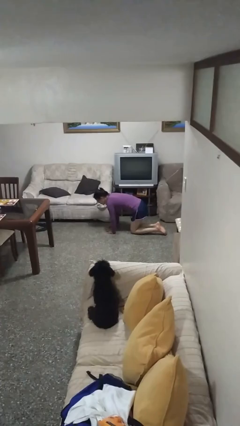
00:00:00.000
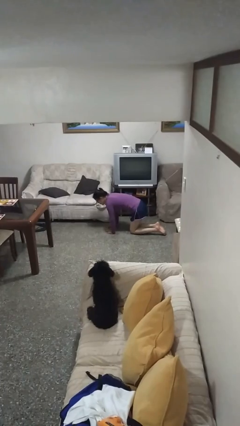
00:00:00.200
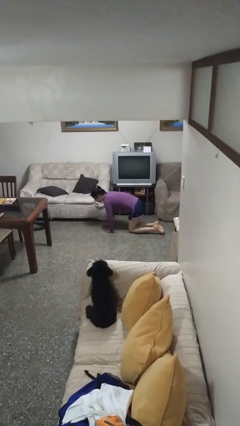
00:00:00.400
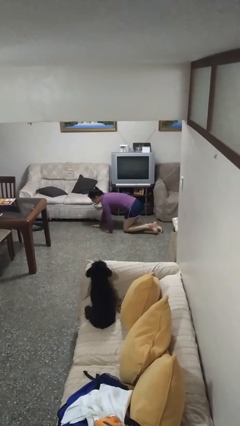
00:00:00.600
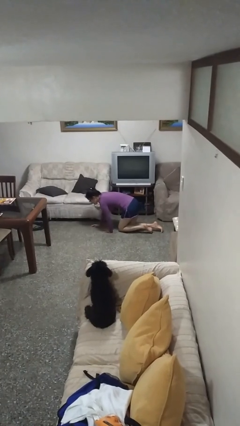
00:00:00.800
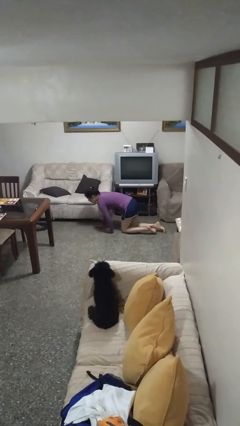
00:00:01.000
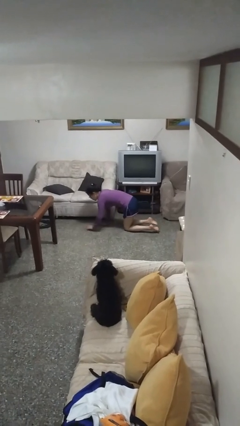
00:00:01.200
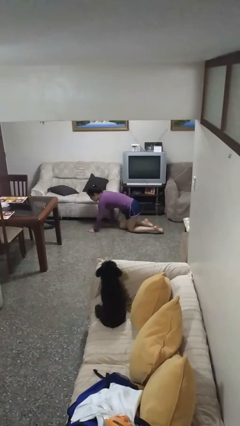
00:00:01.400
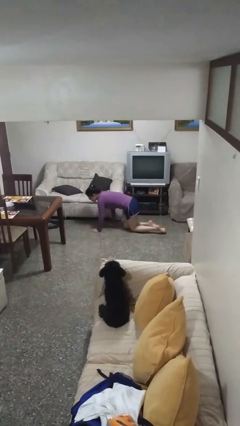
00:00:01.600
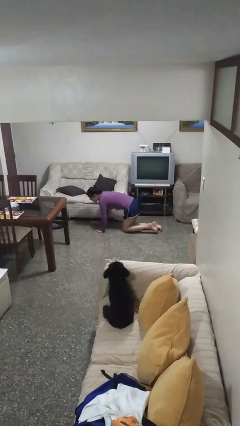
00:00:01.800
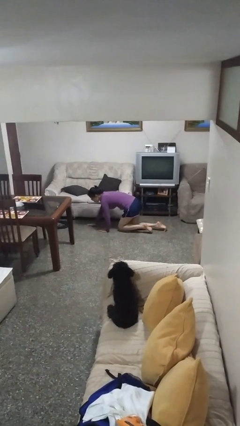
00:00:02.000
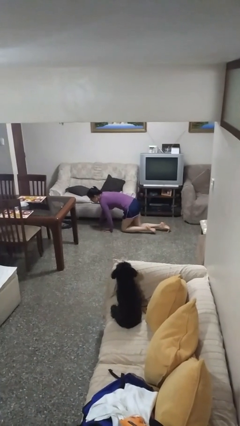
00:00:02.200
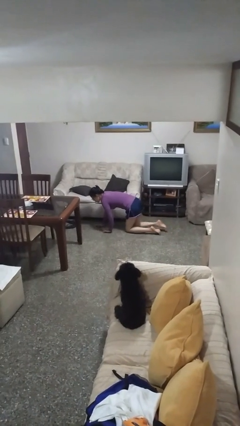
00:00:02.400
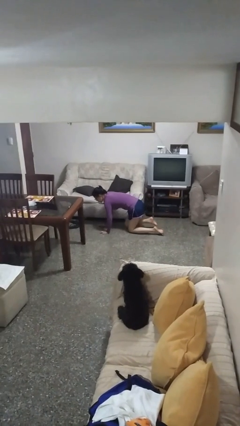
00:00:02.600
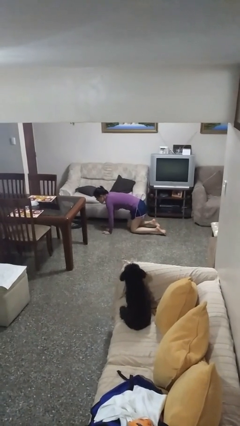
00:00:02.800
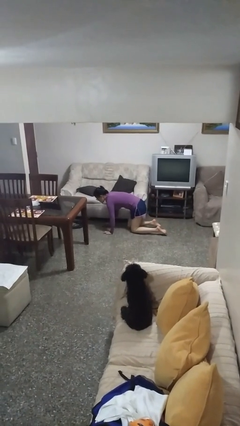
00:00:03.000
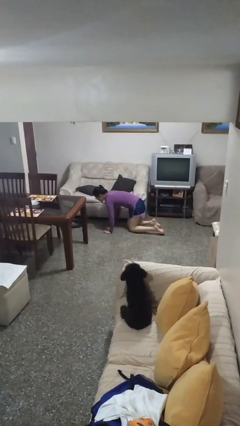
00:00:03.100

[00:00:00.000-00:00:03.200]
person crawls

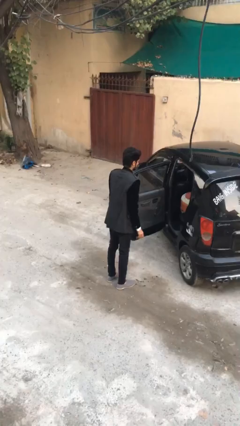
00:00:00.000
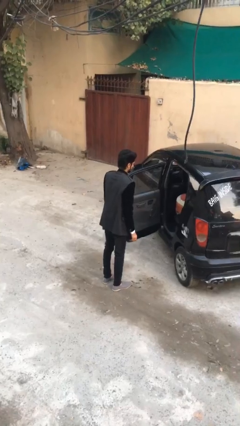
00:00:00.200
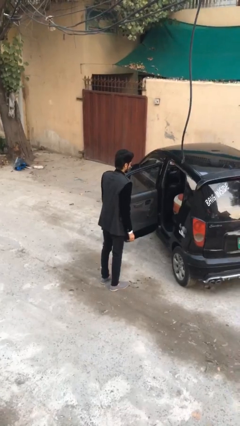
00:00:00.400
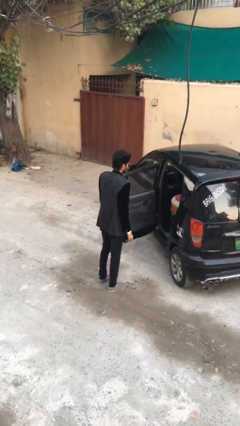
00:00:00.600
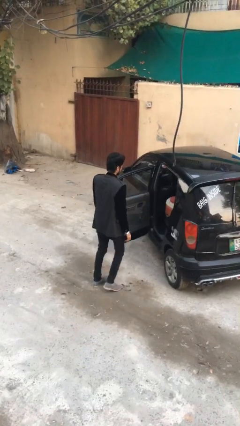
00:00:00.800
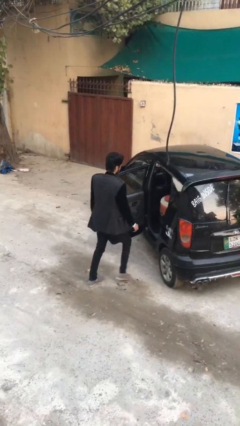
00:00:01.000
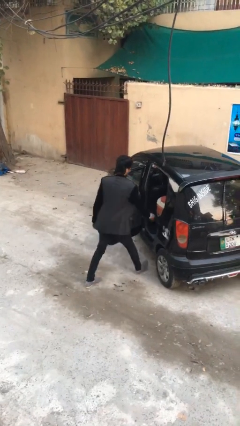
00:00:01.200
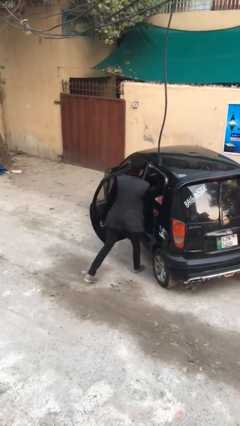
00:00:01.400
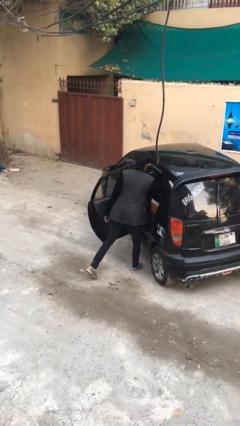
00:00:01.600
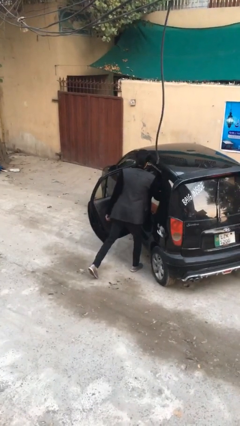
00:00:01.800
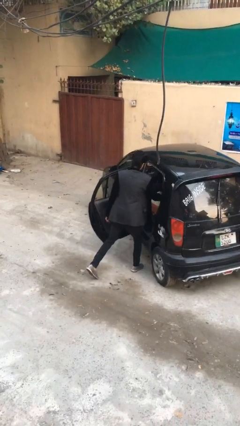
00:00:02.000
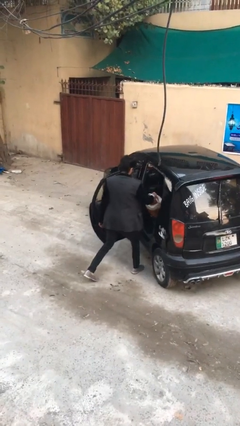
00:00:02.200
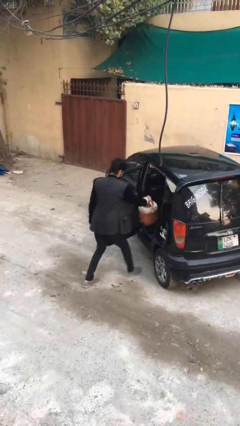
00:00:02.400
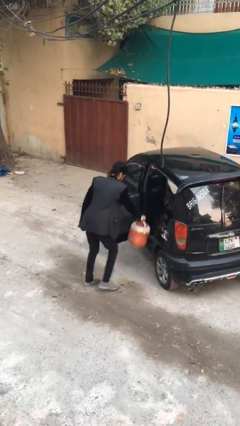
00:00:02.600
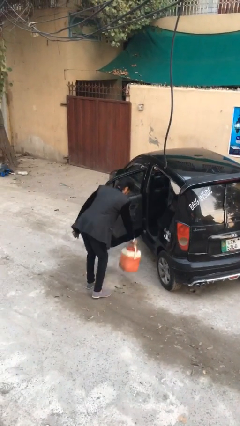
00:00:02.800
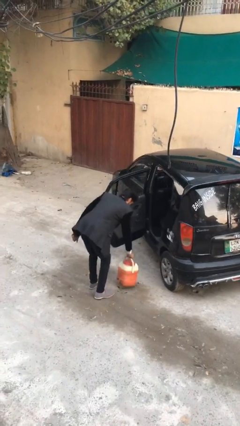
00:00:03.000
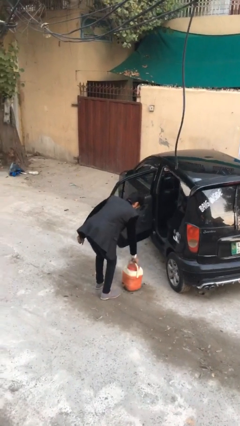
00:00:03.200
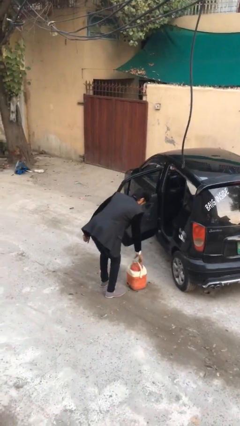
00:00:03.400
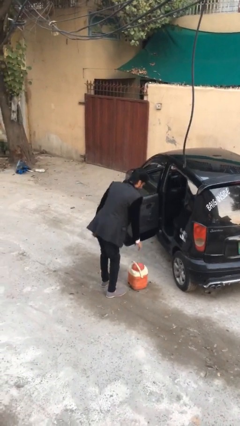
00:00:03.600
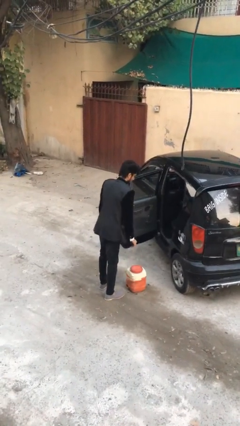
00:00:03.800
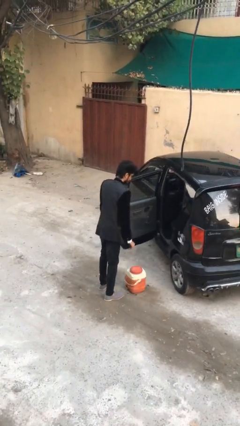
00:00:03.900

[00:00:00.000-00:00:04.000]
person unloads car

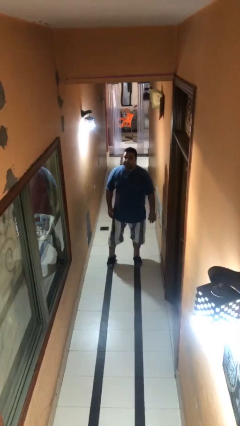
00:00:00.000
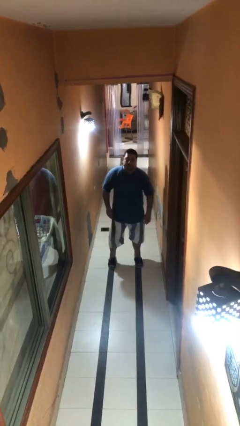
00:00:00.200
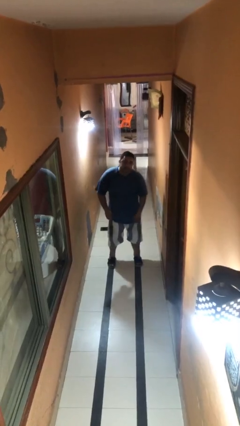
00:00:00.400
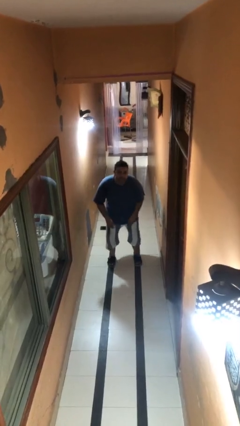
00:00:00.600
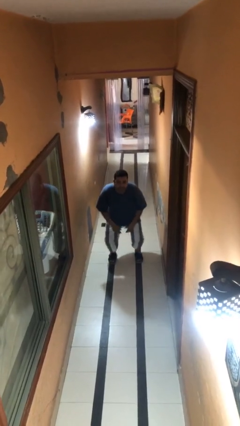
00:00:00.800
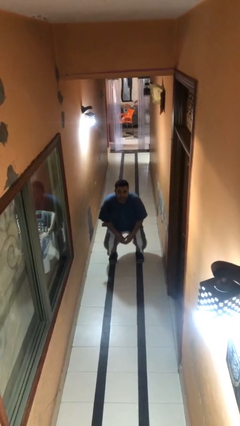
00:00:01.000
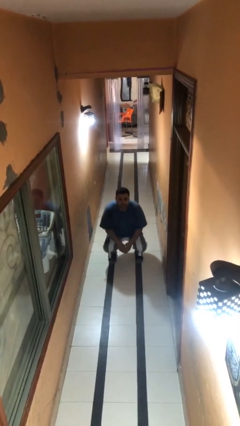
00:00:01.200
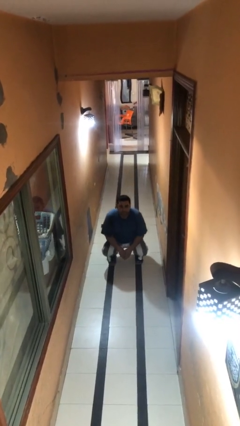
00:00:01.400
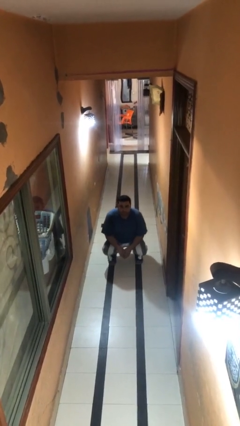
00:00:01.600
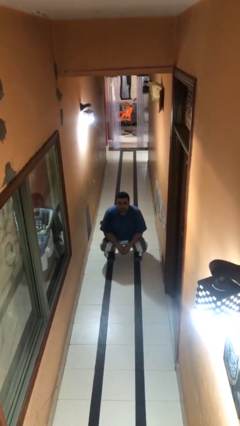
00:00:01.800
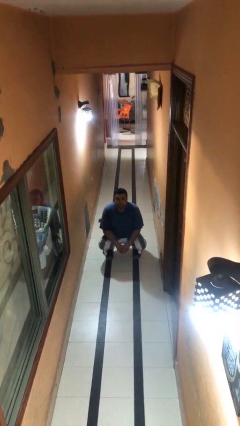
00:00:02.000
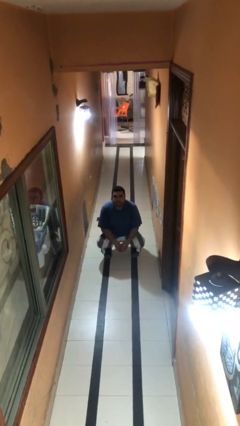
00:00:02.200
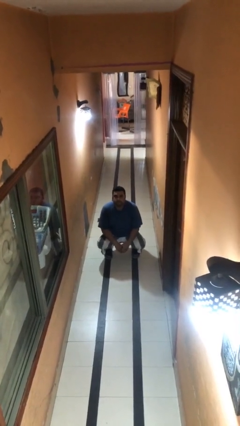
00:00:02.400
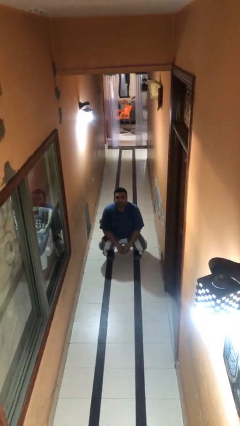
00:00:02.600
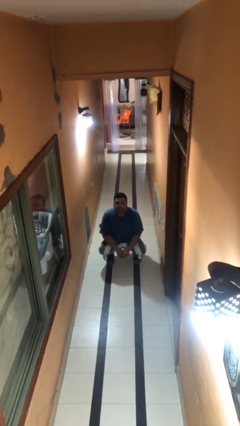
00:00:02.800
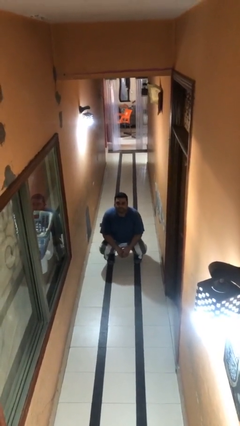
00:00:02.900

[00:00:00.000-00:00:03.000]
person squats

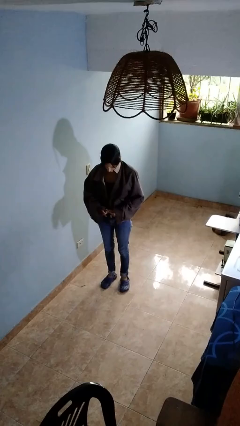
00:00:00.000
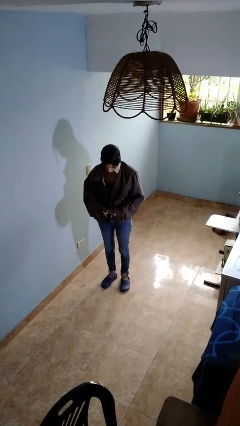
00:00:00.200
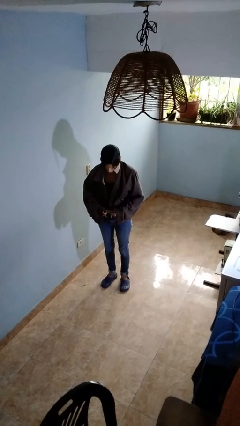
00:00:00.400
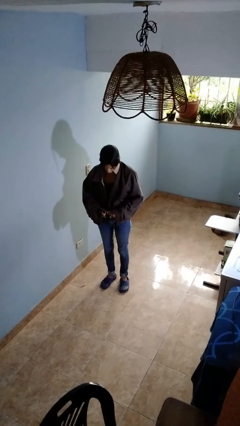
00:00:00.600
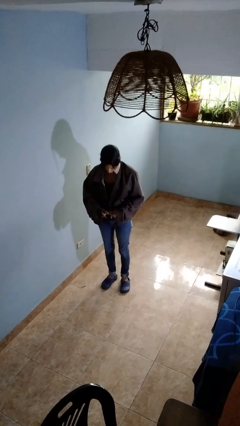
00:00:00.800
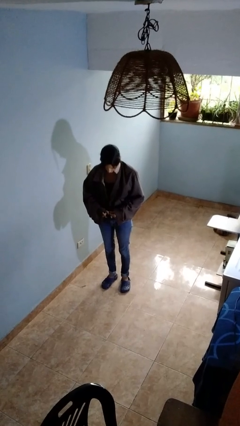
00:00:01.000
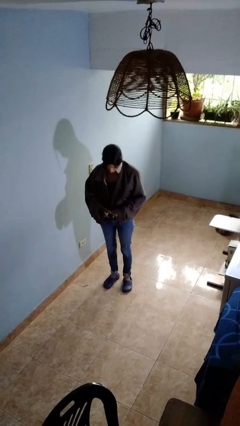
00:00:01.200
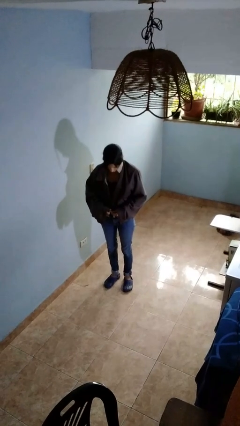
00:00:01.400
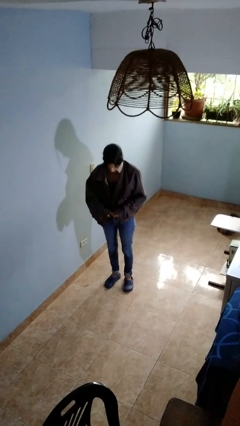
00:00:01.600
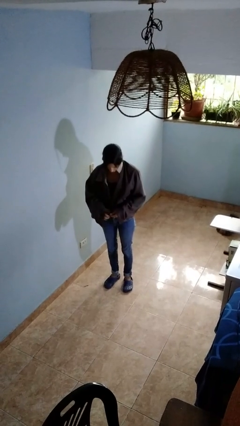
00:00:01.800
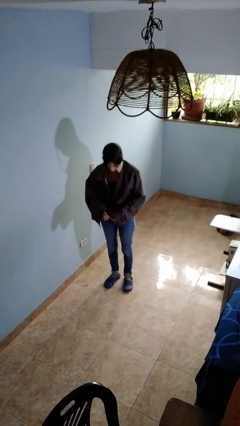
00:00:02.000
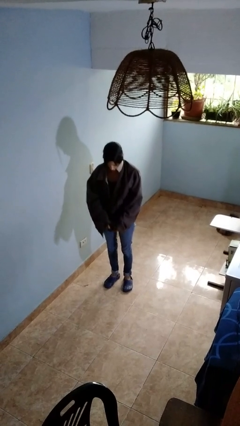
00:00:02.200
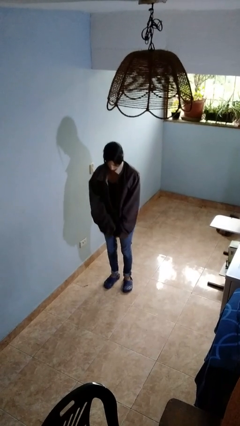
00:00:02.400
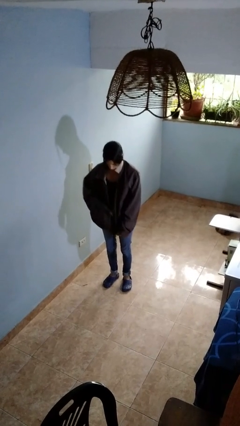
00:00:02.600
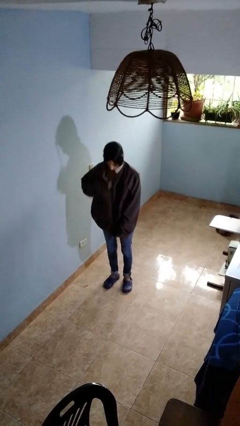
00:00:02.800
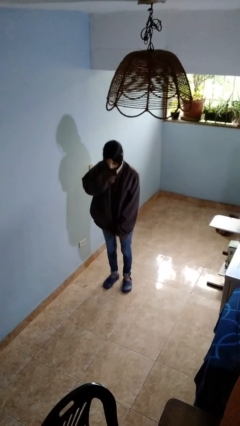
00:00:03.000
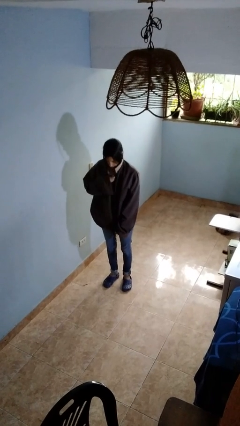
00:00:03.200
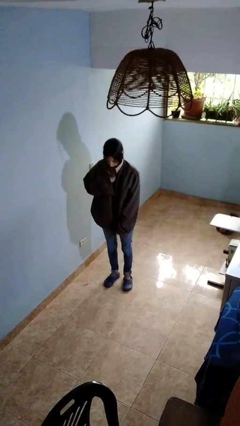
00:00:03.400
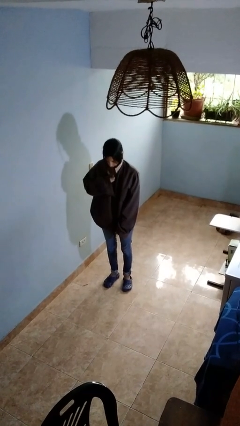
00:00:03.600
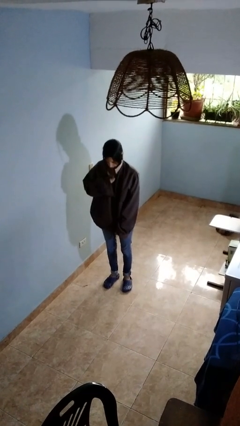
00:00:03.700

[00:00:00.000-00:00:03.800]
person zips up jacket

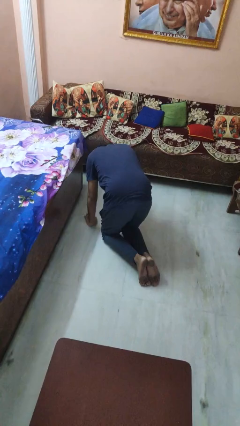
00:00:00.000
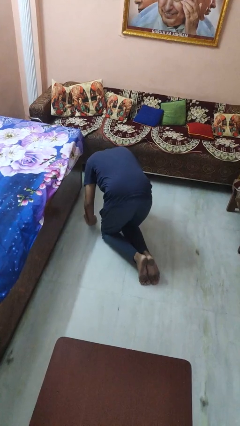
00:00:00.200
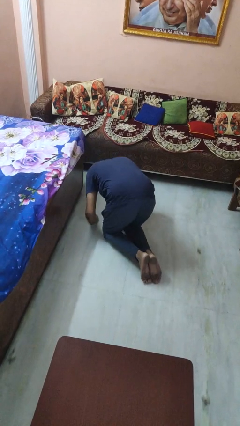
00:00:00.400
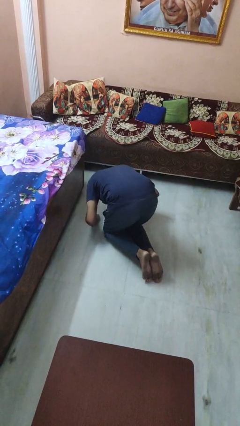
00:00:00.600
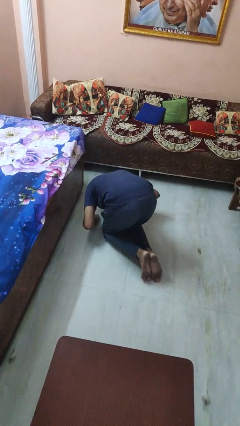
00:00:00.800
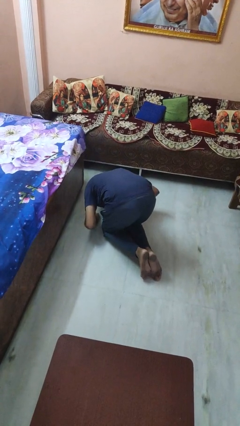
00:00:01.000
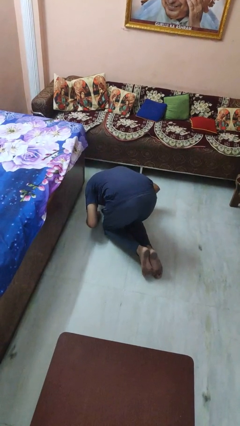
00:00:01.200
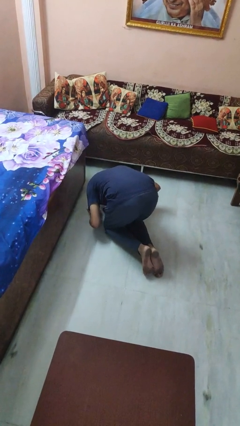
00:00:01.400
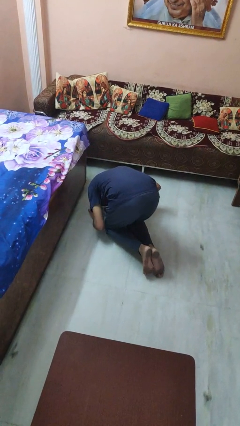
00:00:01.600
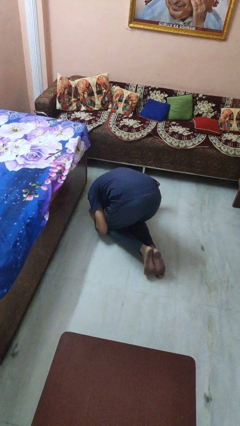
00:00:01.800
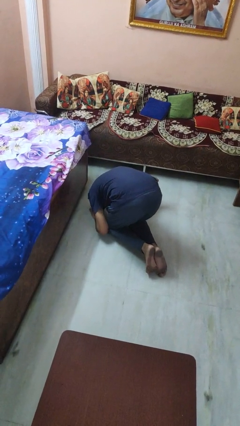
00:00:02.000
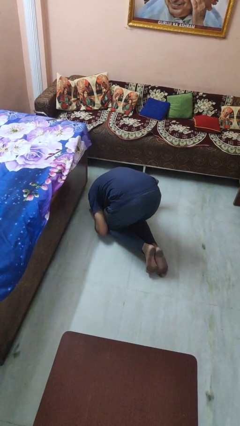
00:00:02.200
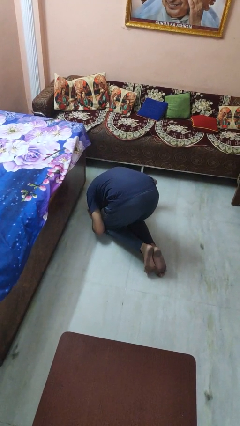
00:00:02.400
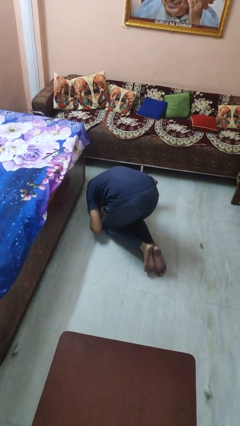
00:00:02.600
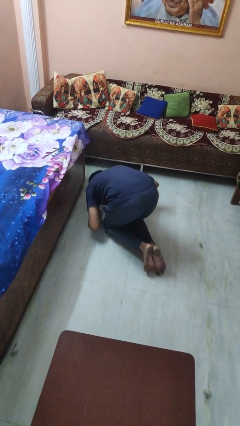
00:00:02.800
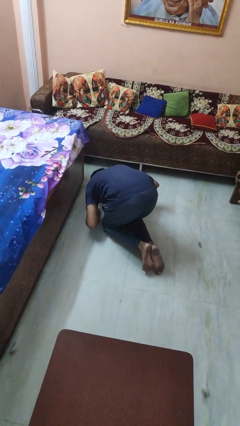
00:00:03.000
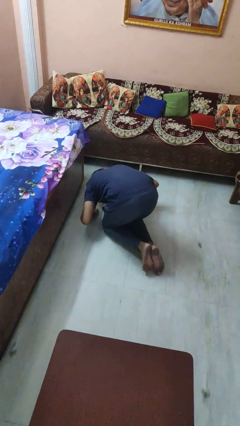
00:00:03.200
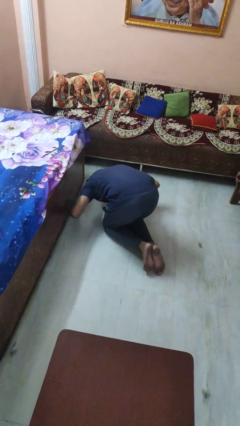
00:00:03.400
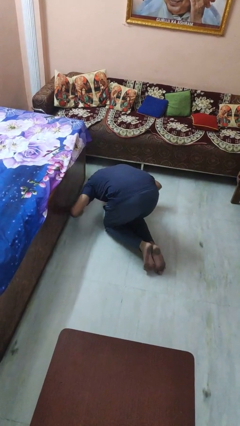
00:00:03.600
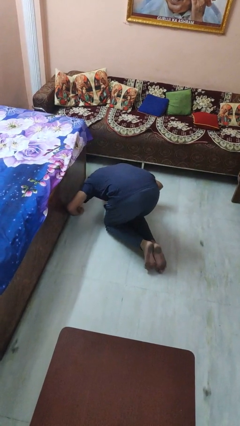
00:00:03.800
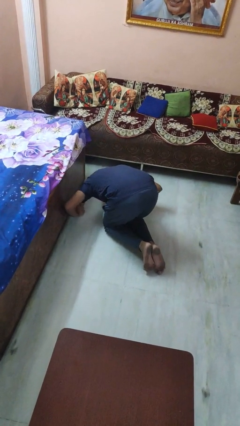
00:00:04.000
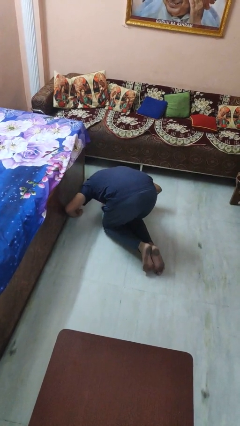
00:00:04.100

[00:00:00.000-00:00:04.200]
person searches under bed
